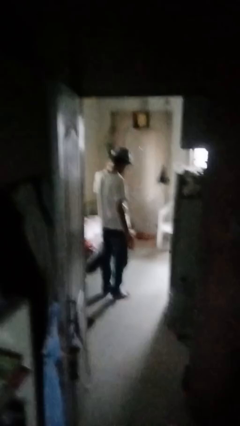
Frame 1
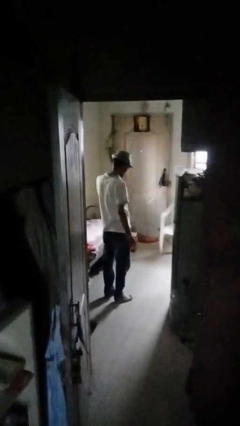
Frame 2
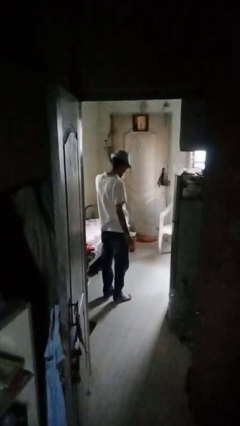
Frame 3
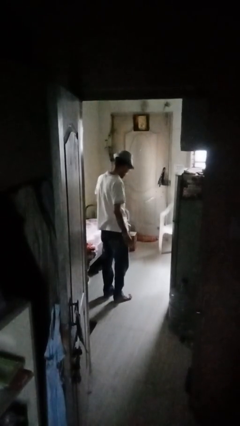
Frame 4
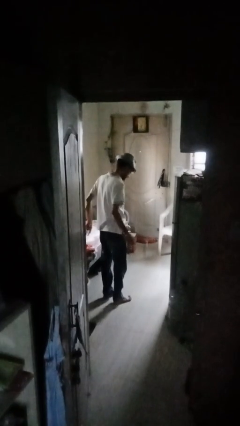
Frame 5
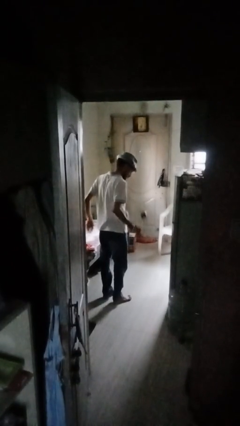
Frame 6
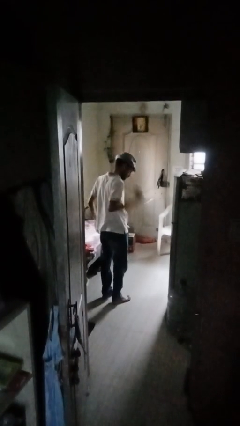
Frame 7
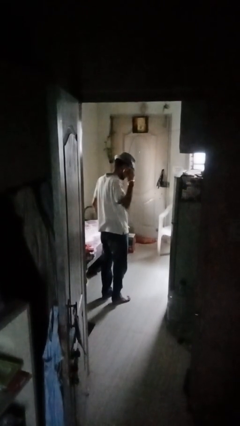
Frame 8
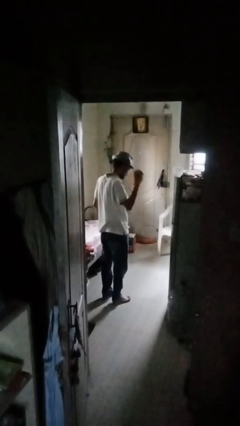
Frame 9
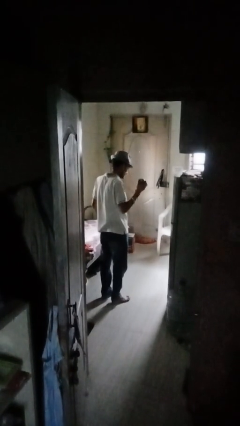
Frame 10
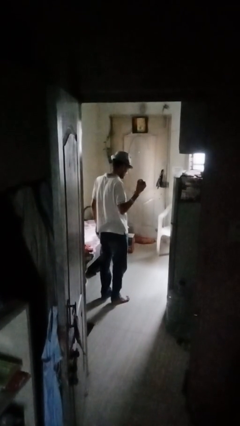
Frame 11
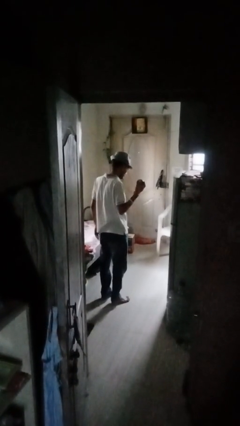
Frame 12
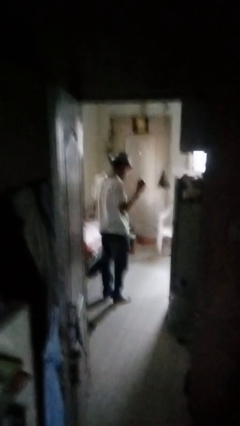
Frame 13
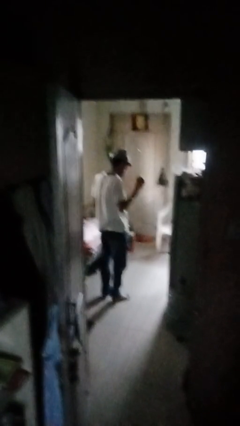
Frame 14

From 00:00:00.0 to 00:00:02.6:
person bounces ball on floor

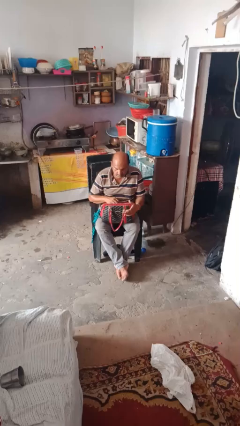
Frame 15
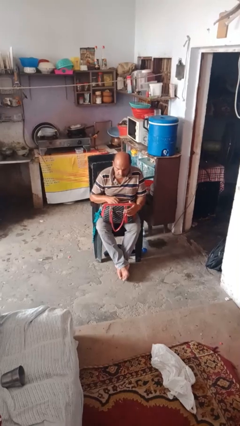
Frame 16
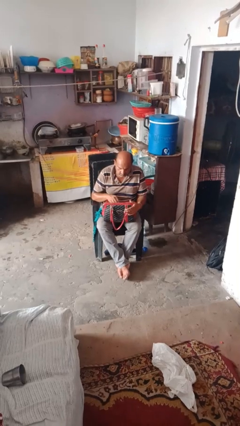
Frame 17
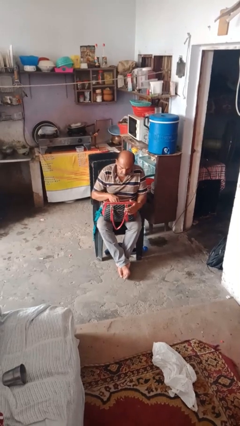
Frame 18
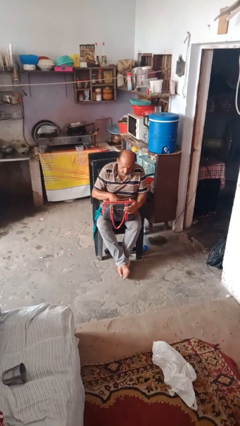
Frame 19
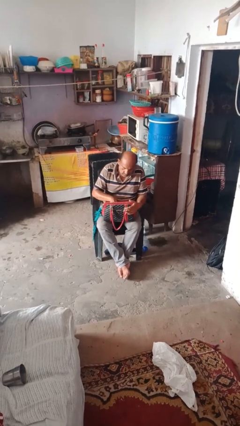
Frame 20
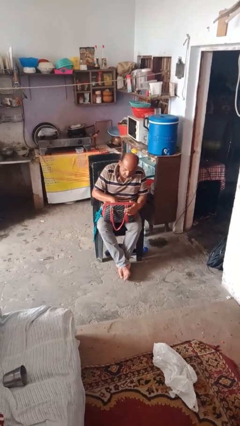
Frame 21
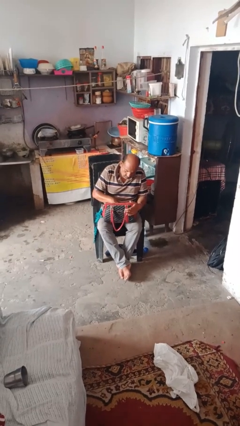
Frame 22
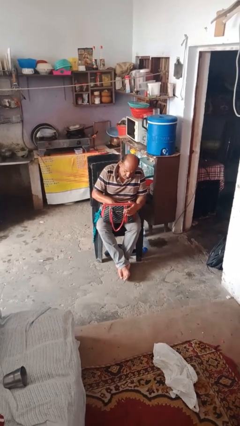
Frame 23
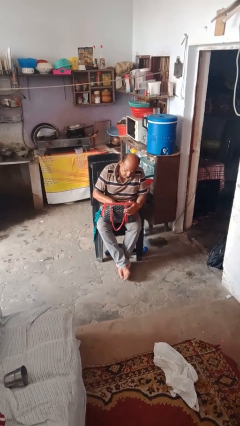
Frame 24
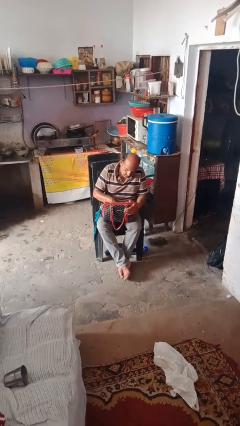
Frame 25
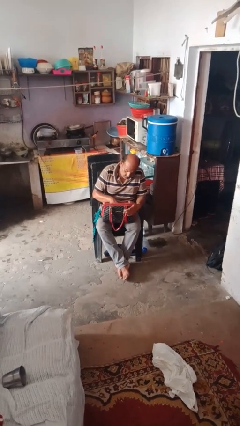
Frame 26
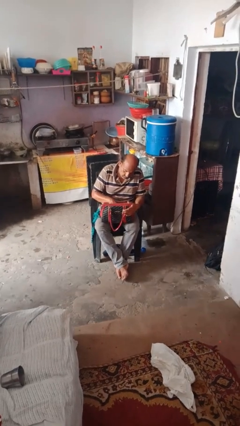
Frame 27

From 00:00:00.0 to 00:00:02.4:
person searches in purse

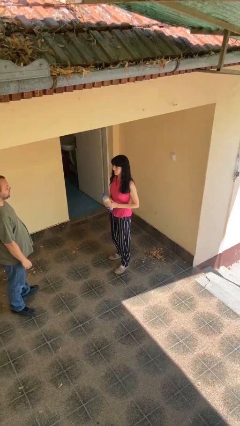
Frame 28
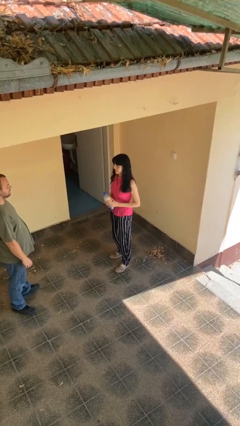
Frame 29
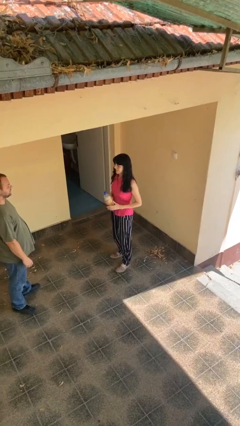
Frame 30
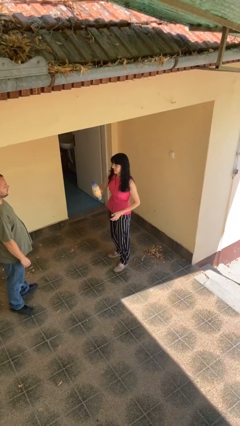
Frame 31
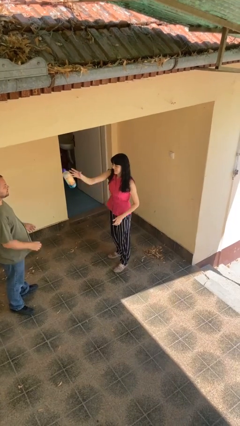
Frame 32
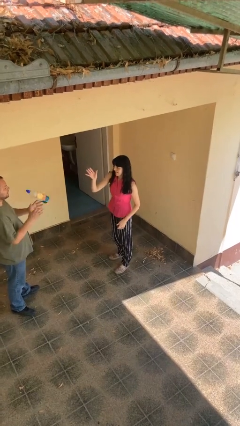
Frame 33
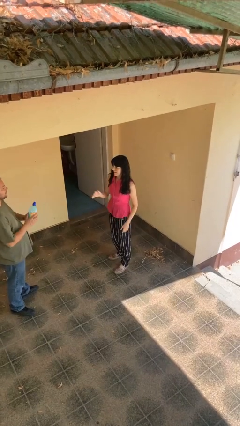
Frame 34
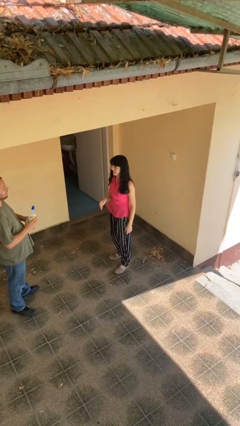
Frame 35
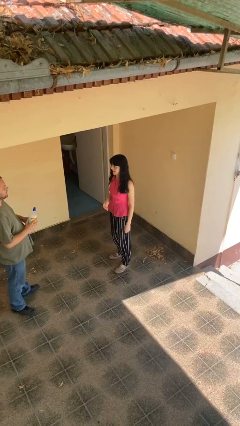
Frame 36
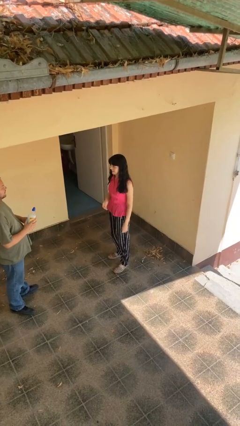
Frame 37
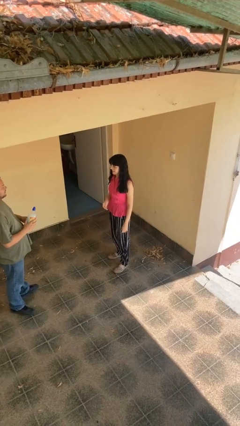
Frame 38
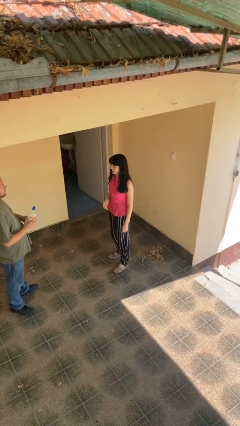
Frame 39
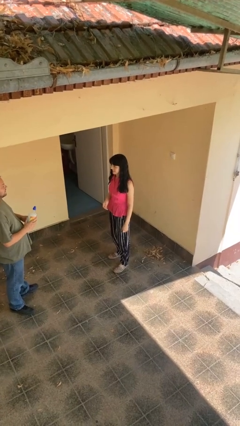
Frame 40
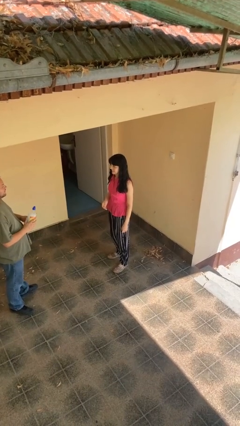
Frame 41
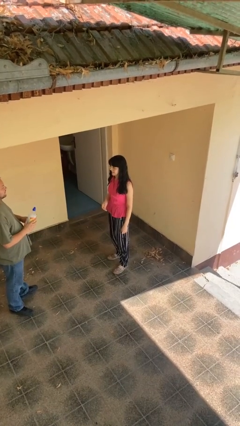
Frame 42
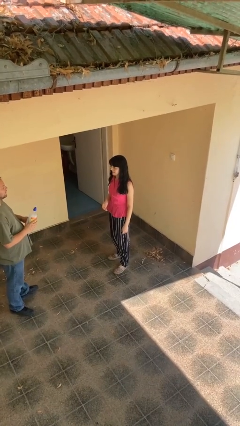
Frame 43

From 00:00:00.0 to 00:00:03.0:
person throws object to person

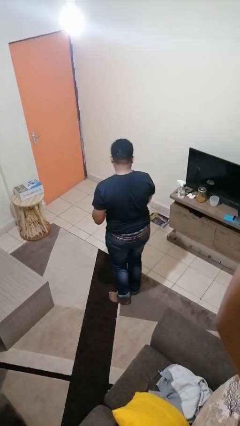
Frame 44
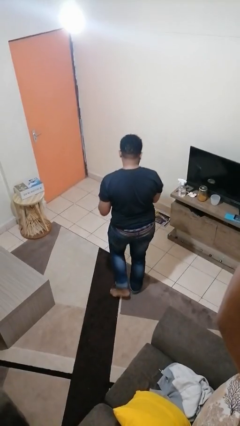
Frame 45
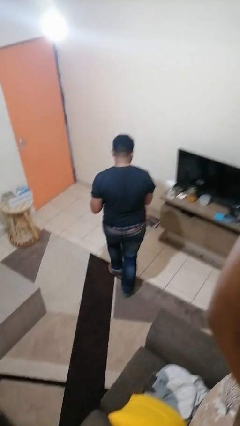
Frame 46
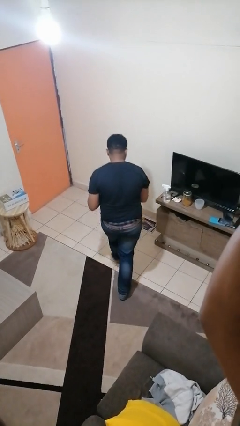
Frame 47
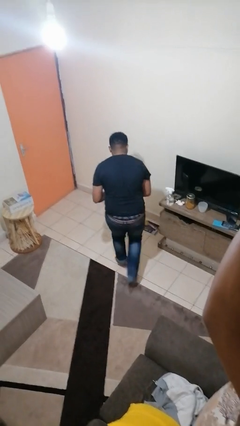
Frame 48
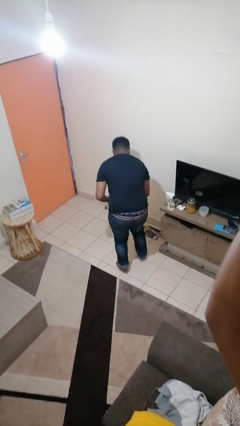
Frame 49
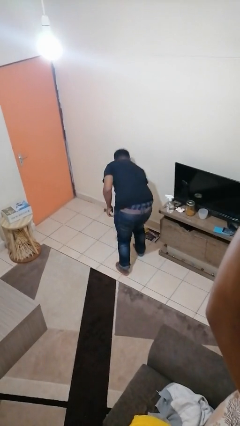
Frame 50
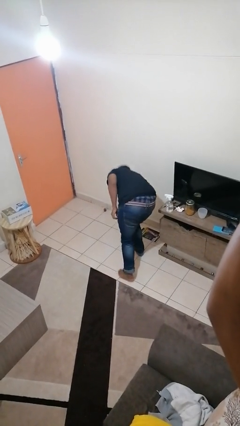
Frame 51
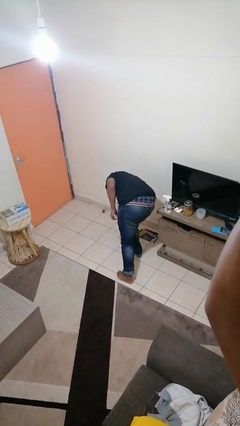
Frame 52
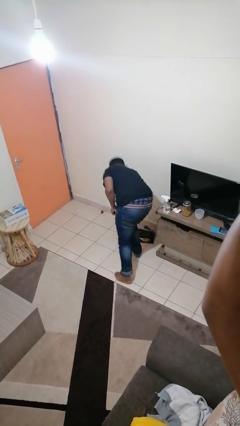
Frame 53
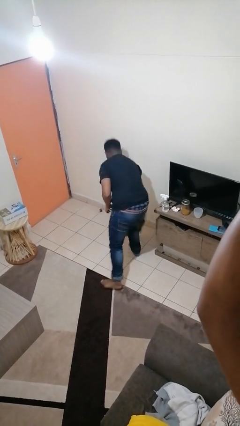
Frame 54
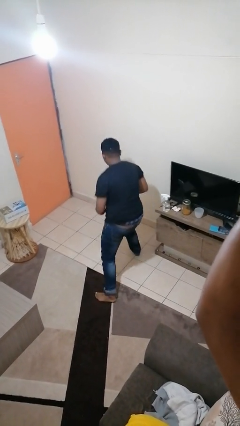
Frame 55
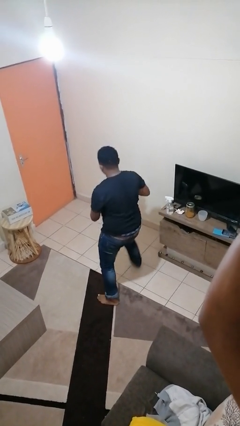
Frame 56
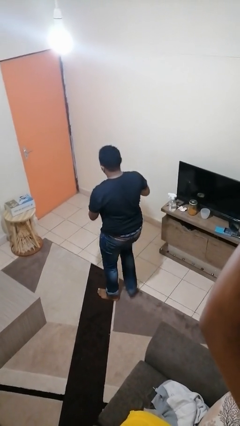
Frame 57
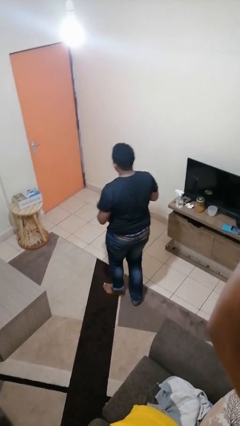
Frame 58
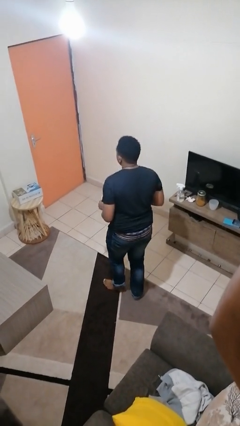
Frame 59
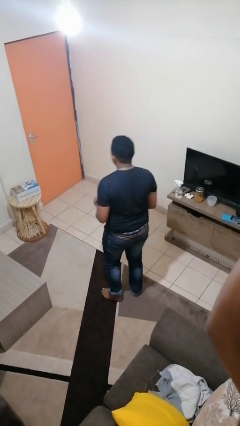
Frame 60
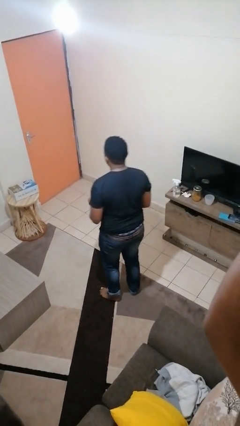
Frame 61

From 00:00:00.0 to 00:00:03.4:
person picks up object from floor

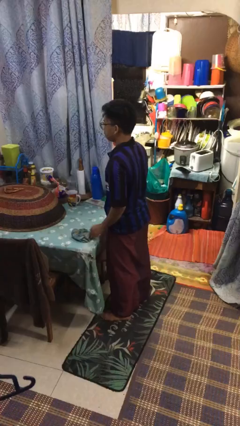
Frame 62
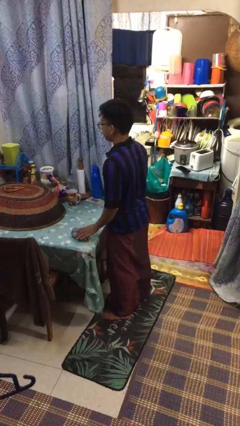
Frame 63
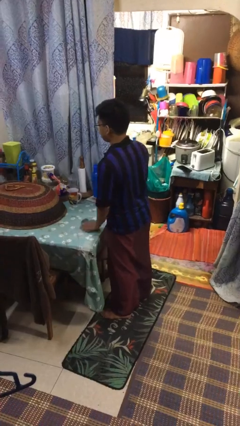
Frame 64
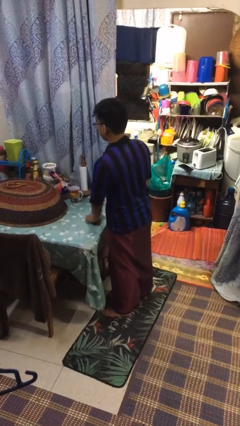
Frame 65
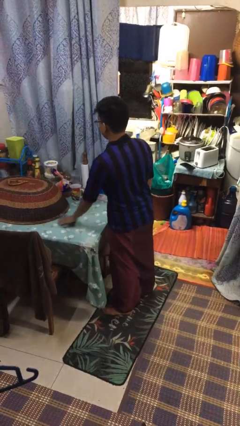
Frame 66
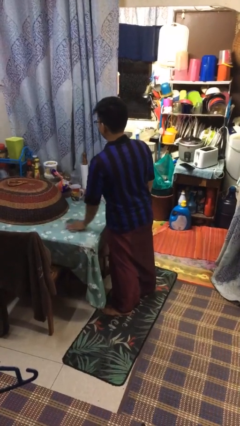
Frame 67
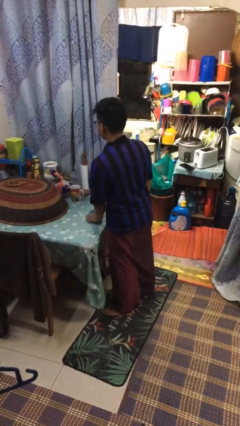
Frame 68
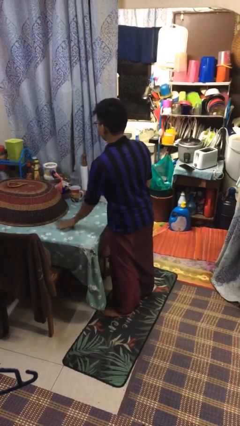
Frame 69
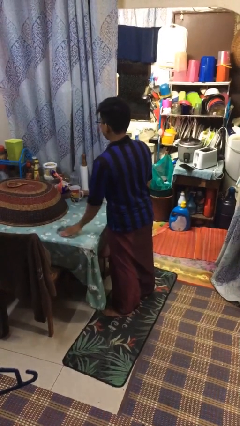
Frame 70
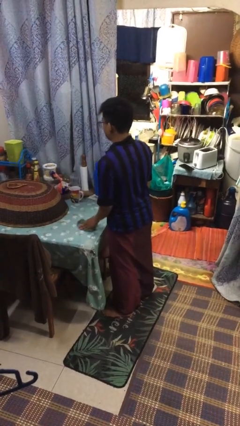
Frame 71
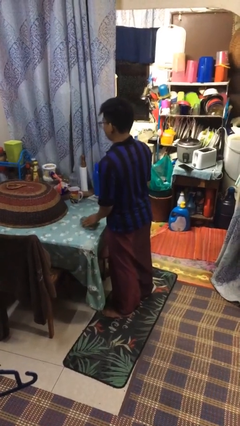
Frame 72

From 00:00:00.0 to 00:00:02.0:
person cleans table with rag

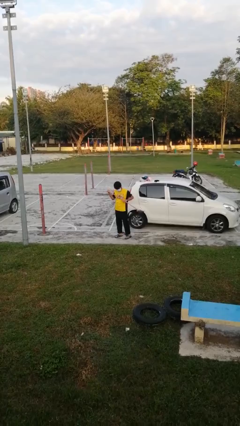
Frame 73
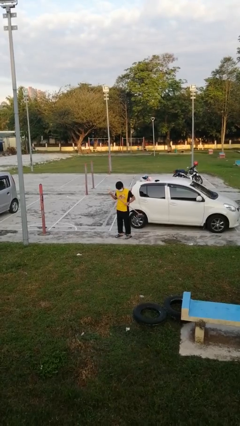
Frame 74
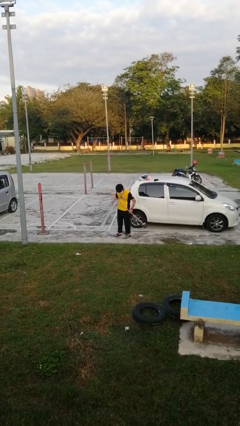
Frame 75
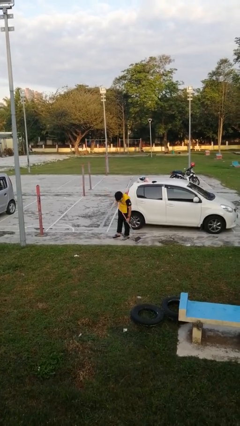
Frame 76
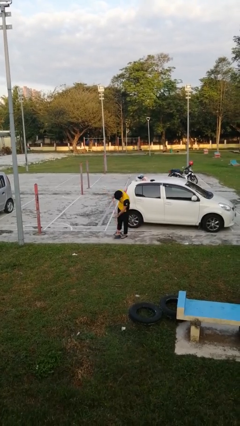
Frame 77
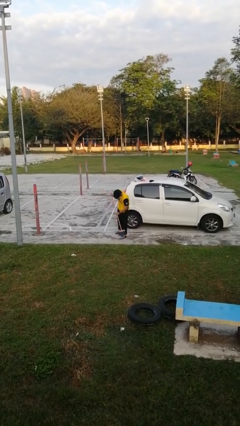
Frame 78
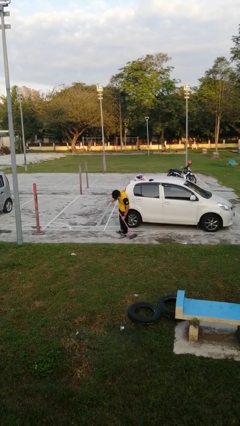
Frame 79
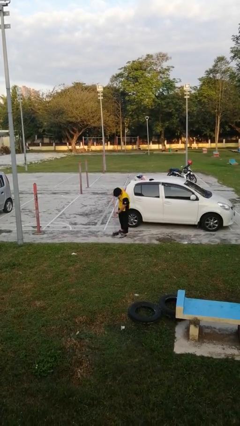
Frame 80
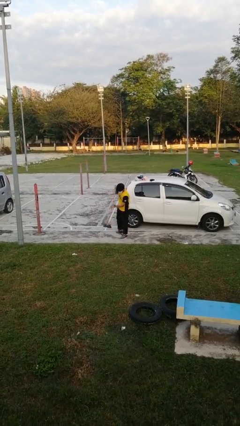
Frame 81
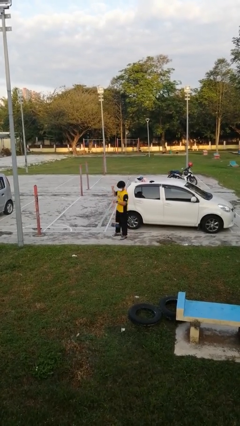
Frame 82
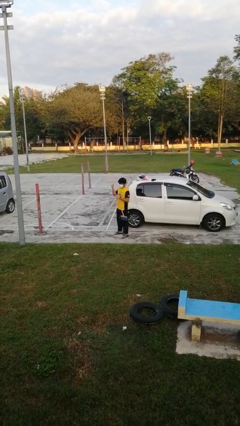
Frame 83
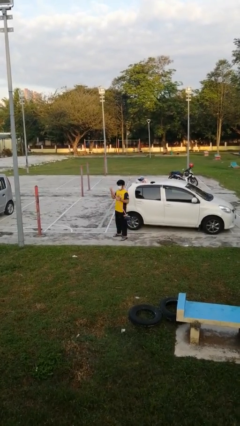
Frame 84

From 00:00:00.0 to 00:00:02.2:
person sweeps floor

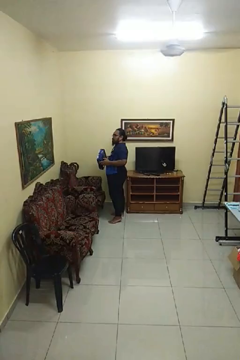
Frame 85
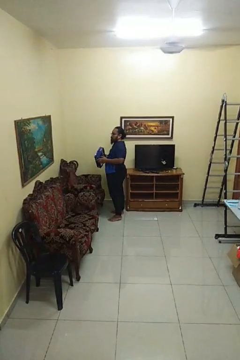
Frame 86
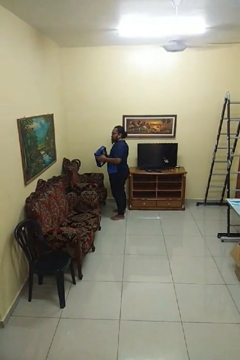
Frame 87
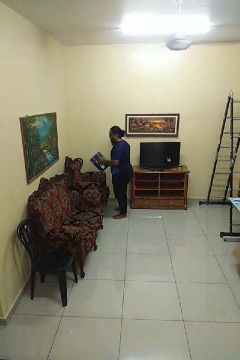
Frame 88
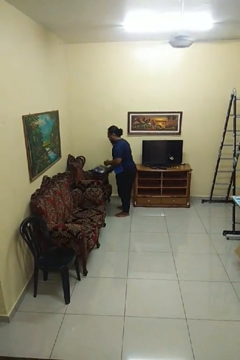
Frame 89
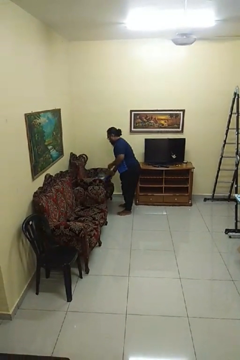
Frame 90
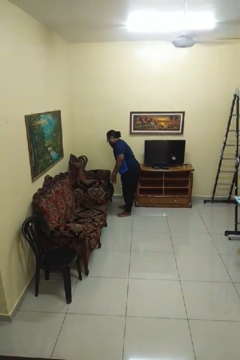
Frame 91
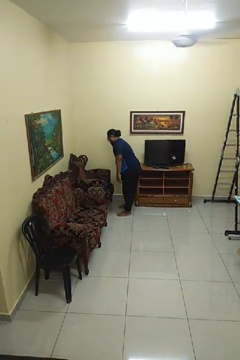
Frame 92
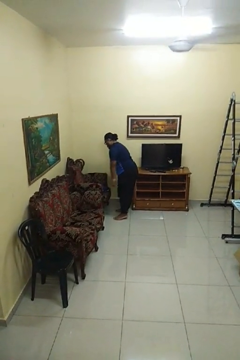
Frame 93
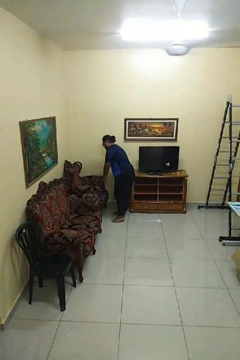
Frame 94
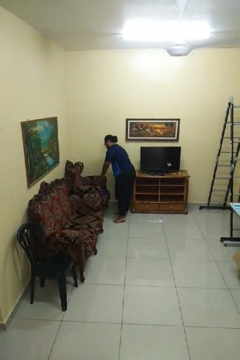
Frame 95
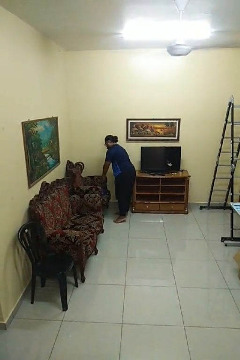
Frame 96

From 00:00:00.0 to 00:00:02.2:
person puts down object on couch
